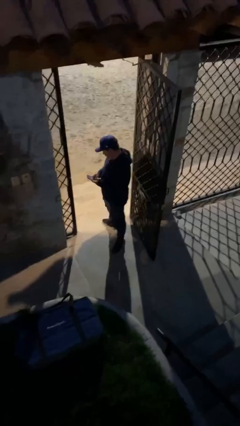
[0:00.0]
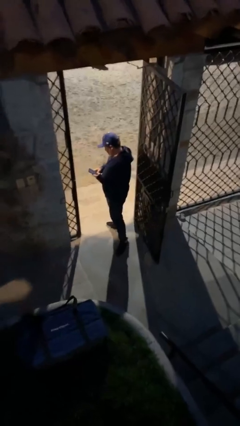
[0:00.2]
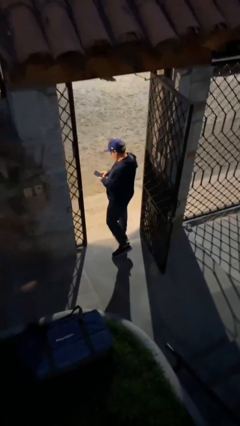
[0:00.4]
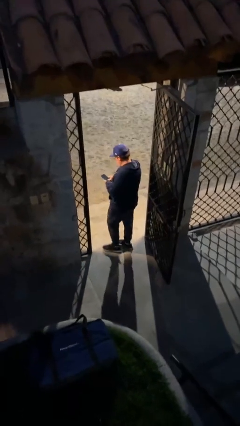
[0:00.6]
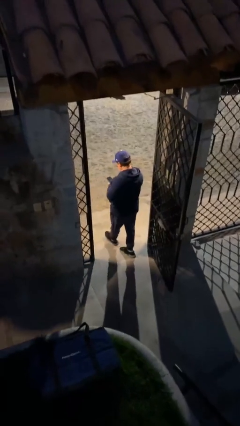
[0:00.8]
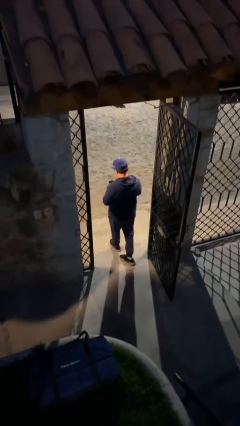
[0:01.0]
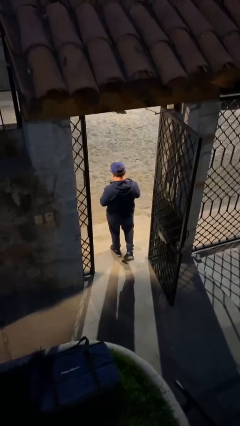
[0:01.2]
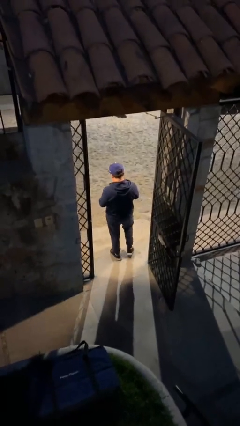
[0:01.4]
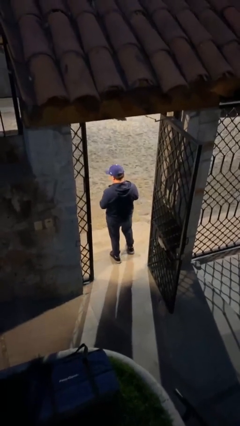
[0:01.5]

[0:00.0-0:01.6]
person exits scene through structure

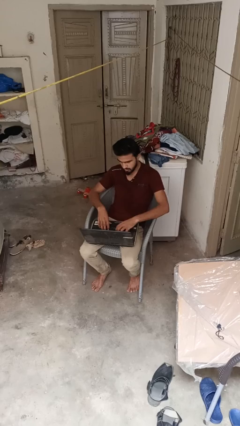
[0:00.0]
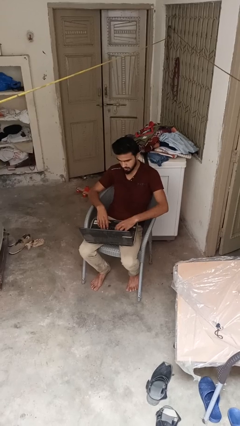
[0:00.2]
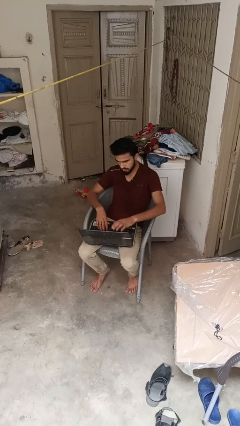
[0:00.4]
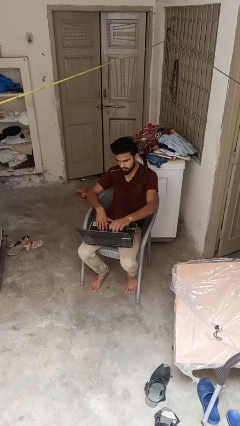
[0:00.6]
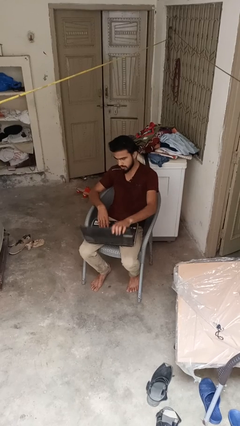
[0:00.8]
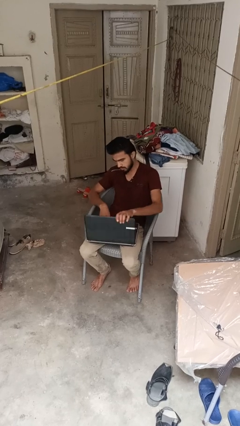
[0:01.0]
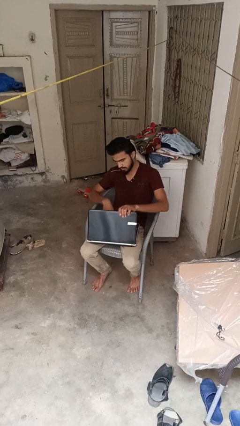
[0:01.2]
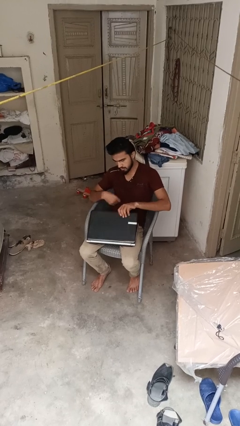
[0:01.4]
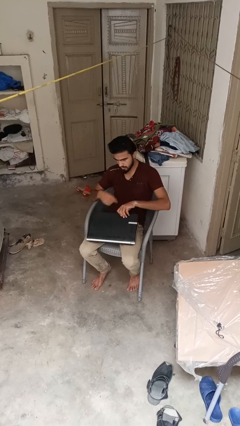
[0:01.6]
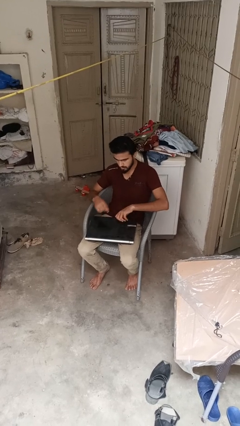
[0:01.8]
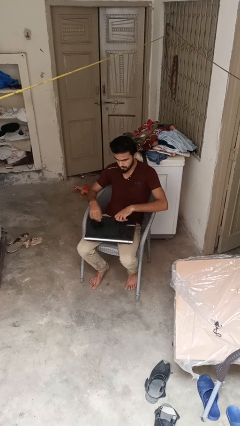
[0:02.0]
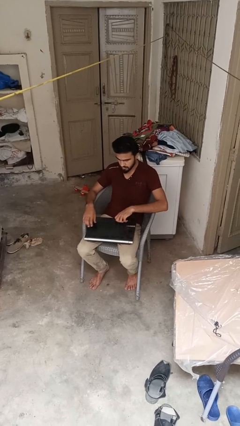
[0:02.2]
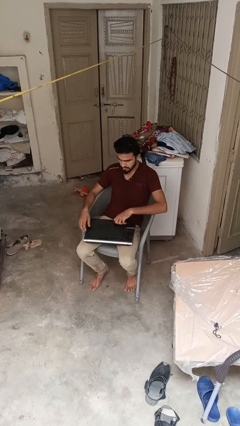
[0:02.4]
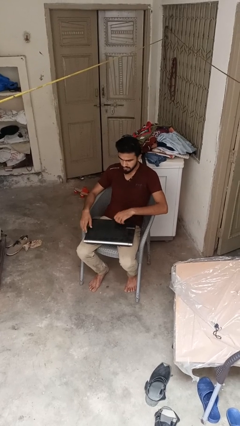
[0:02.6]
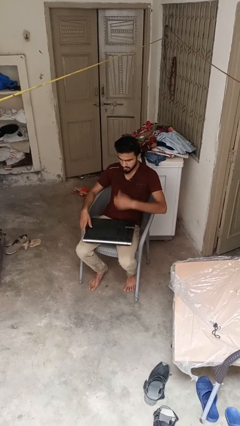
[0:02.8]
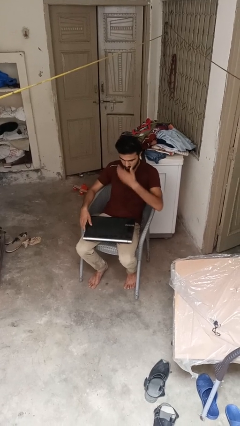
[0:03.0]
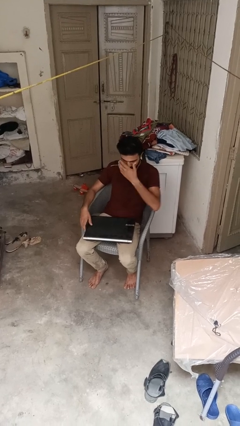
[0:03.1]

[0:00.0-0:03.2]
person closes laptop

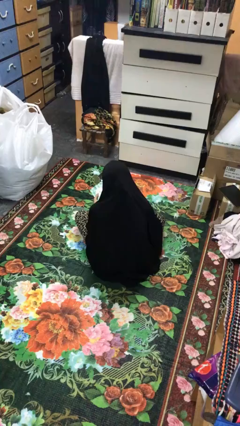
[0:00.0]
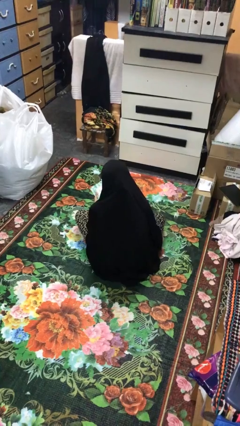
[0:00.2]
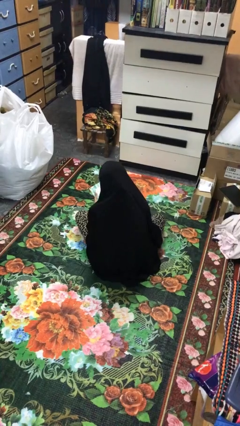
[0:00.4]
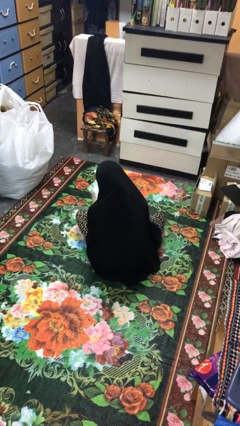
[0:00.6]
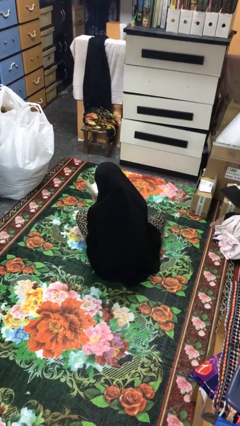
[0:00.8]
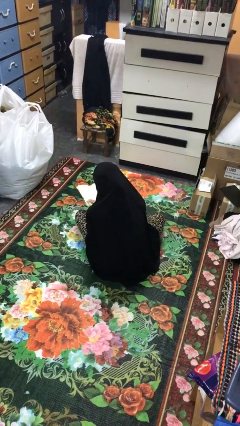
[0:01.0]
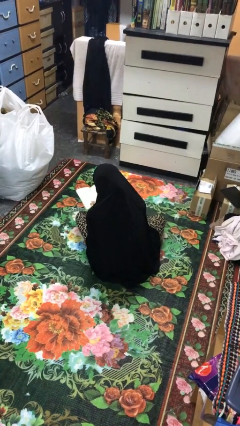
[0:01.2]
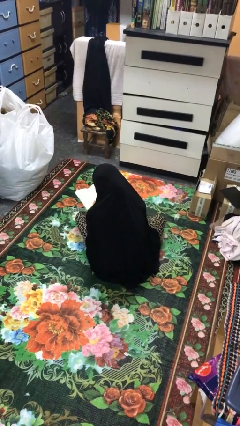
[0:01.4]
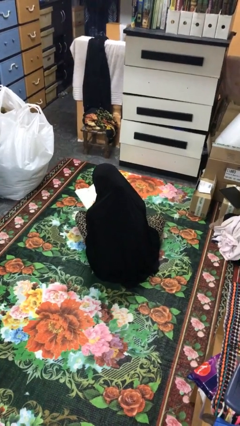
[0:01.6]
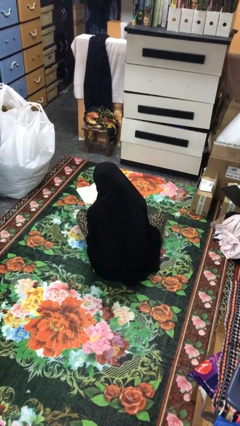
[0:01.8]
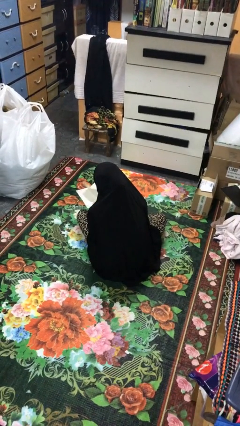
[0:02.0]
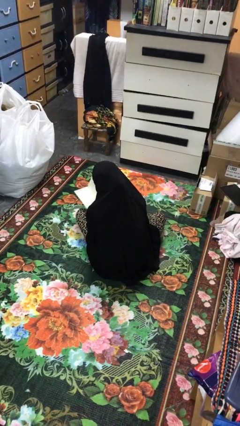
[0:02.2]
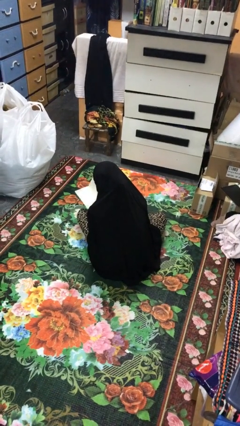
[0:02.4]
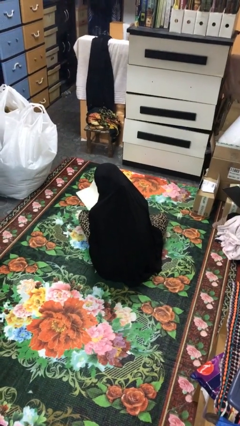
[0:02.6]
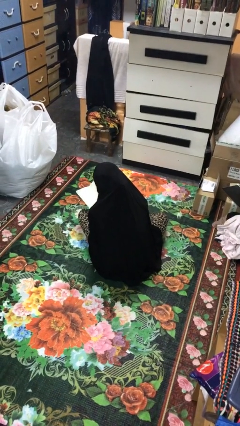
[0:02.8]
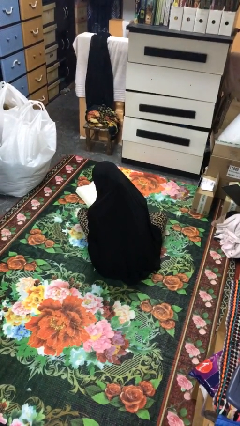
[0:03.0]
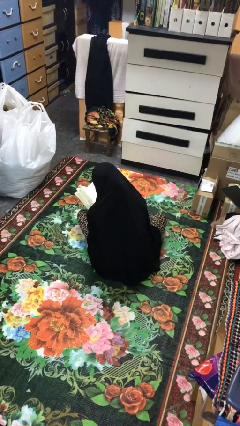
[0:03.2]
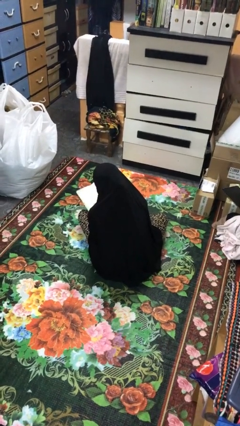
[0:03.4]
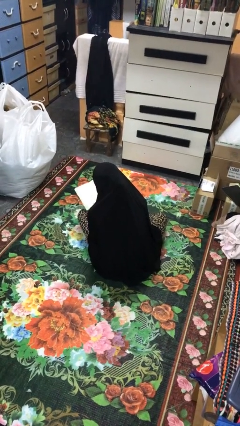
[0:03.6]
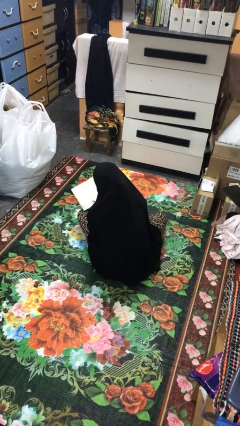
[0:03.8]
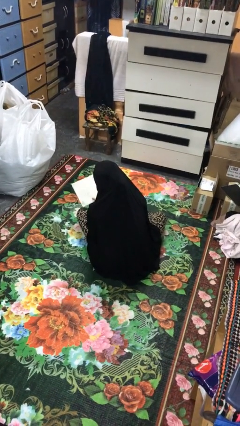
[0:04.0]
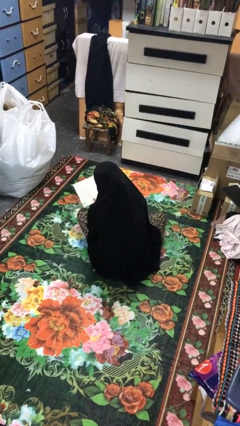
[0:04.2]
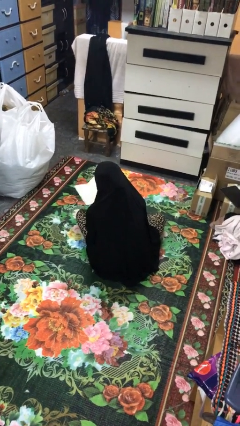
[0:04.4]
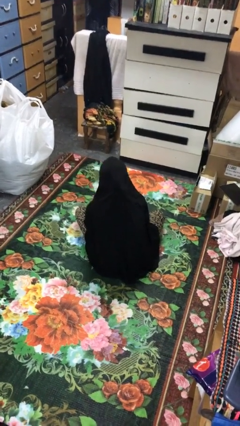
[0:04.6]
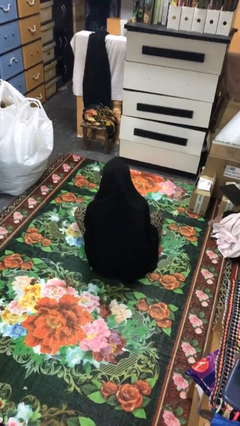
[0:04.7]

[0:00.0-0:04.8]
person reads book

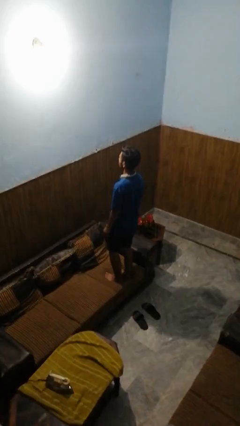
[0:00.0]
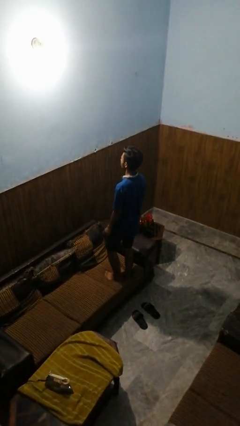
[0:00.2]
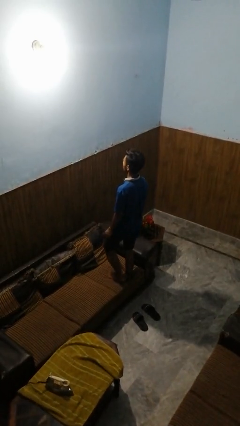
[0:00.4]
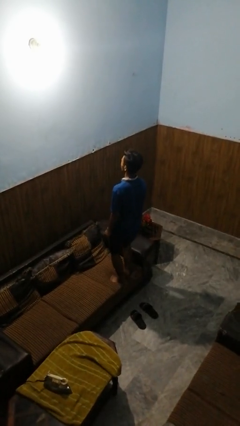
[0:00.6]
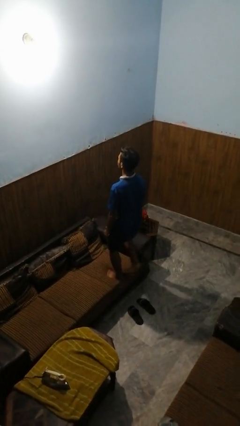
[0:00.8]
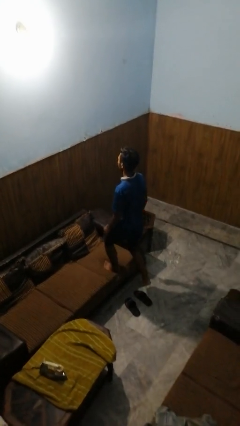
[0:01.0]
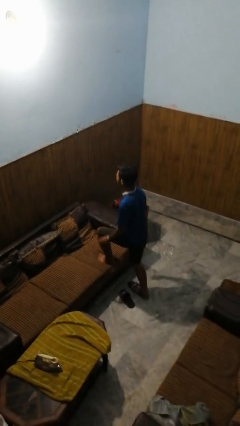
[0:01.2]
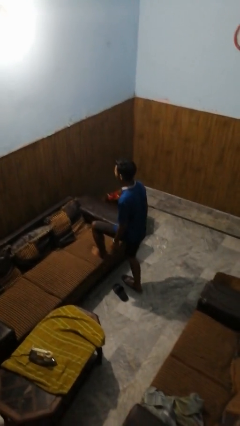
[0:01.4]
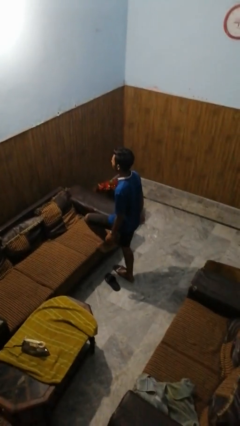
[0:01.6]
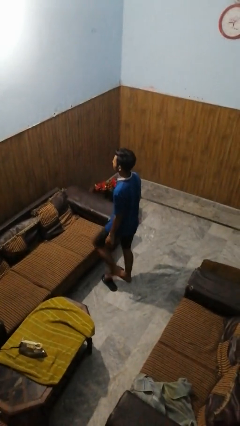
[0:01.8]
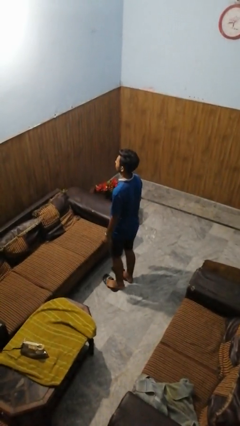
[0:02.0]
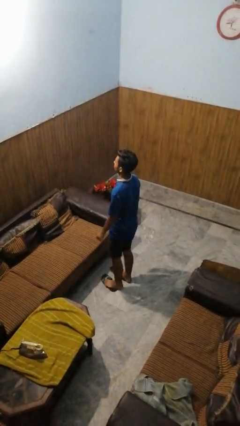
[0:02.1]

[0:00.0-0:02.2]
person climbs off couch

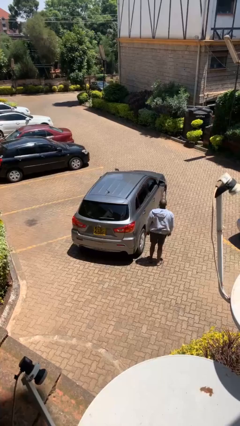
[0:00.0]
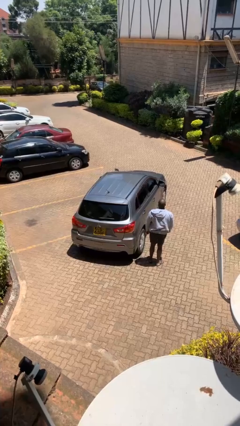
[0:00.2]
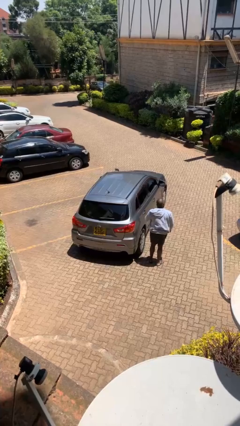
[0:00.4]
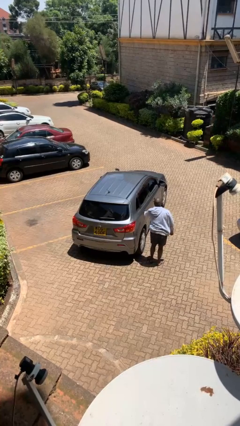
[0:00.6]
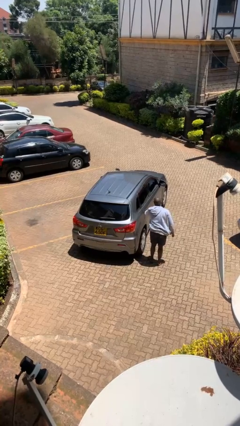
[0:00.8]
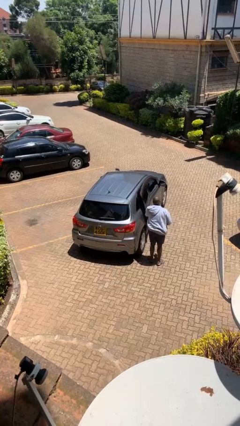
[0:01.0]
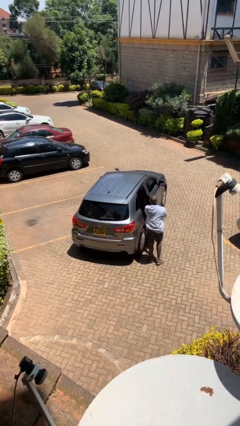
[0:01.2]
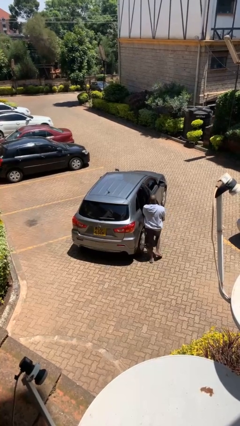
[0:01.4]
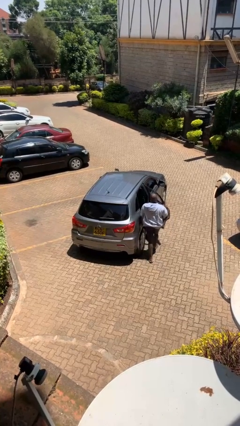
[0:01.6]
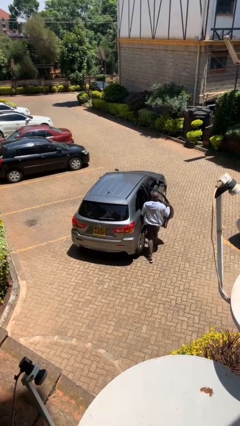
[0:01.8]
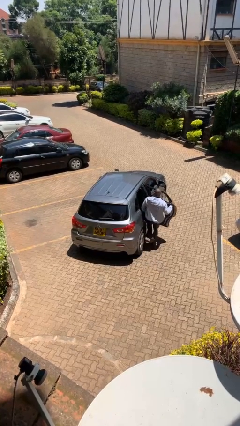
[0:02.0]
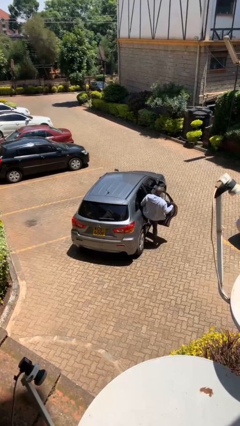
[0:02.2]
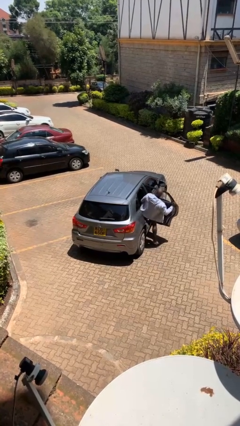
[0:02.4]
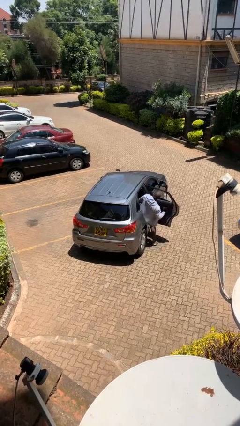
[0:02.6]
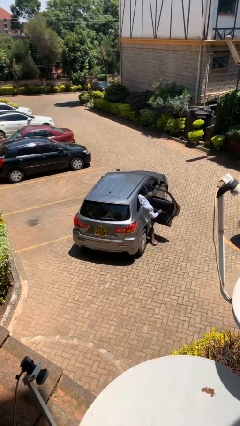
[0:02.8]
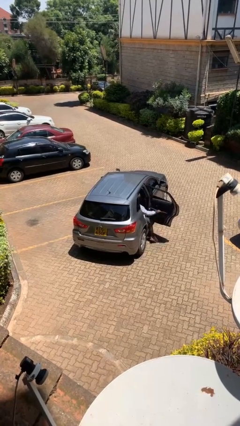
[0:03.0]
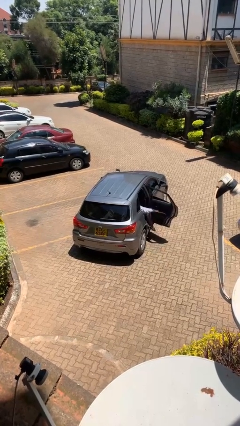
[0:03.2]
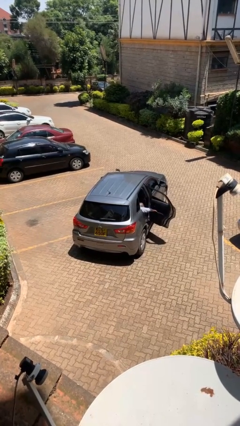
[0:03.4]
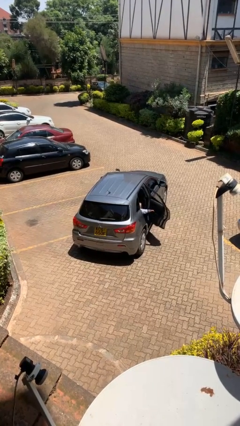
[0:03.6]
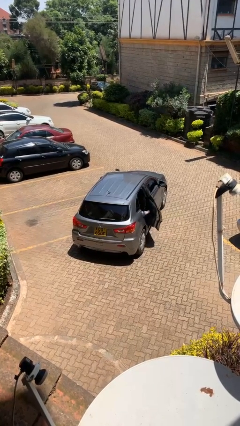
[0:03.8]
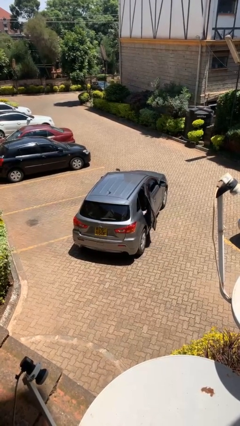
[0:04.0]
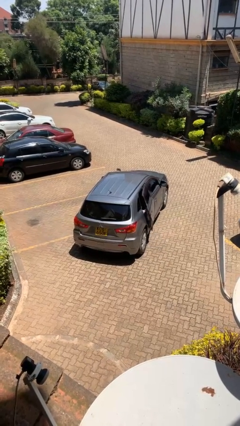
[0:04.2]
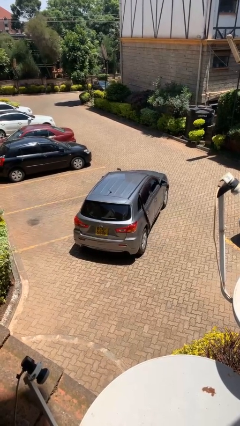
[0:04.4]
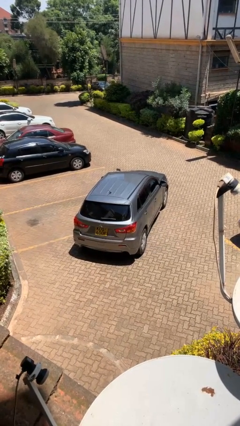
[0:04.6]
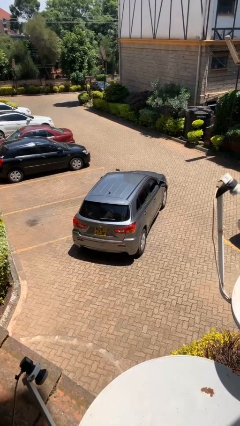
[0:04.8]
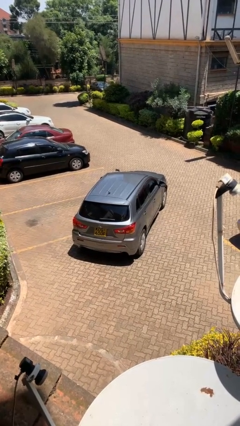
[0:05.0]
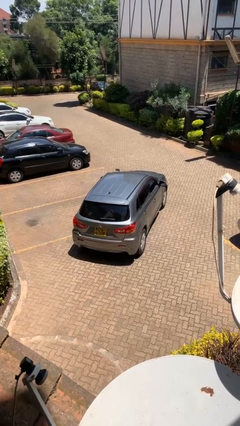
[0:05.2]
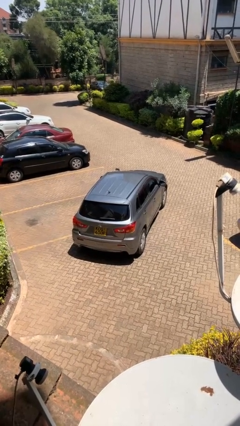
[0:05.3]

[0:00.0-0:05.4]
car picks up person

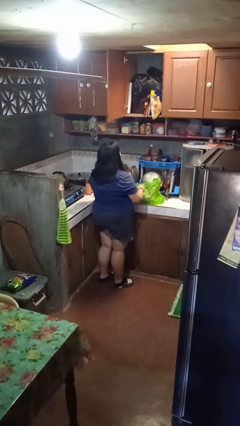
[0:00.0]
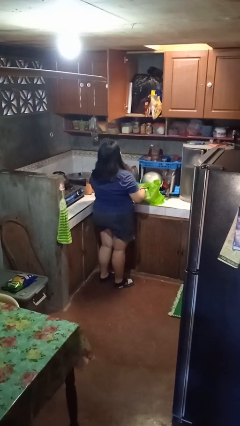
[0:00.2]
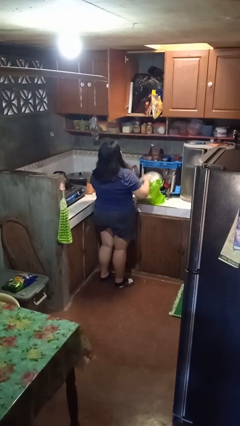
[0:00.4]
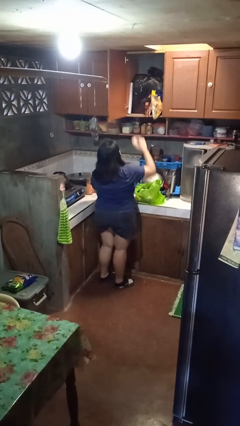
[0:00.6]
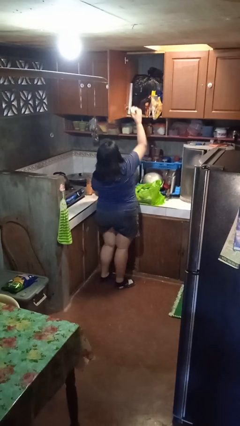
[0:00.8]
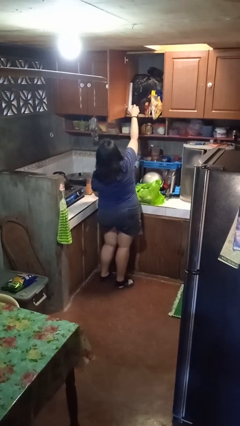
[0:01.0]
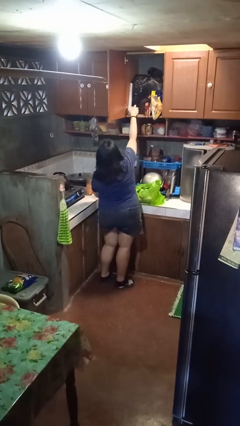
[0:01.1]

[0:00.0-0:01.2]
person loads groceries into cabinet
